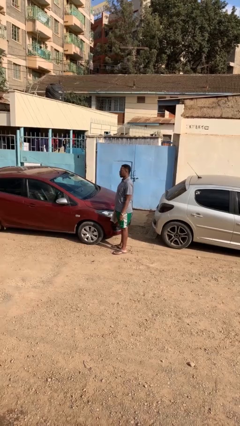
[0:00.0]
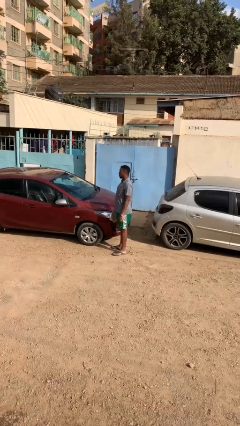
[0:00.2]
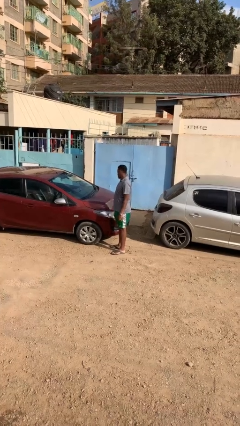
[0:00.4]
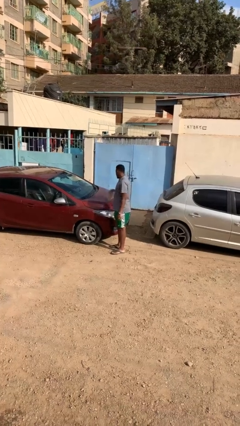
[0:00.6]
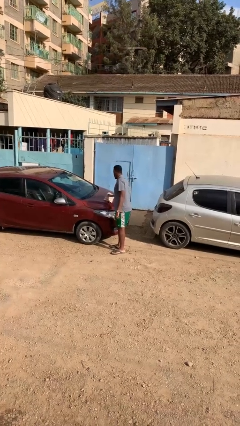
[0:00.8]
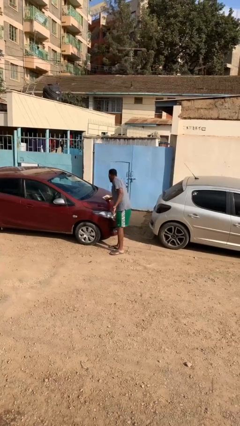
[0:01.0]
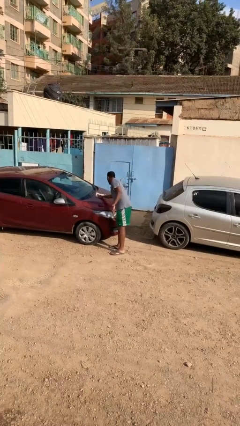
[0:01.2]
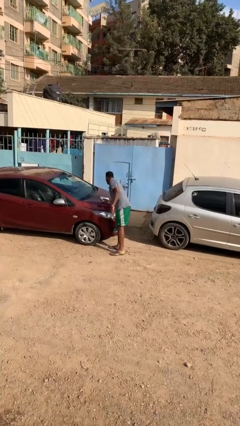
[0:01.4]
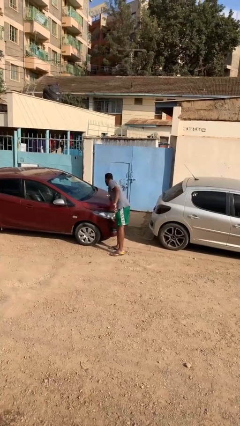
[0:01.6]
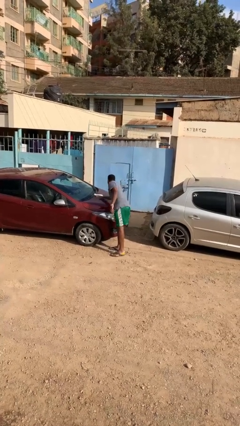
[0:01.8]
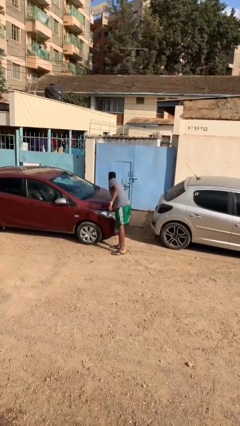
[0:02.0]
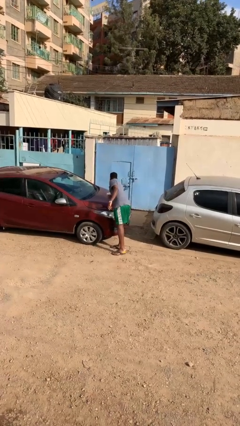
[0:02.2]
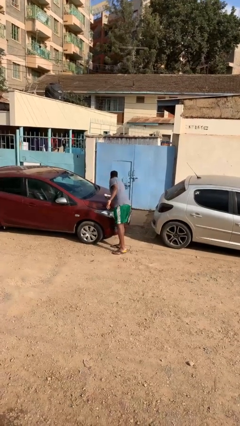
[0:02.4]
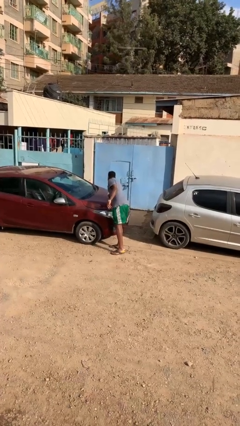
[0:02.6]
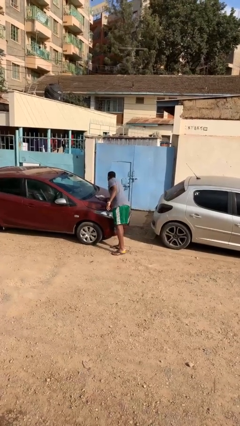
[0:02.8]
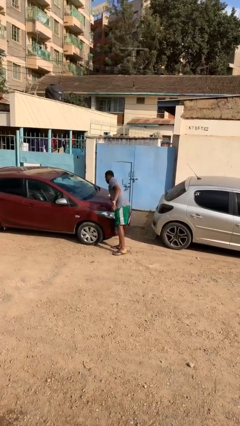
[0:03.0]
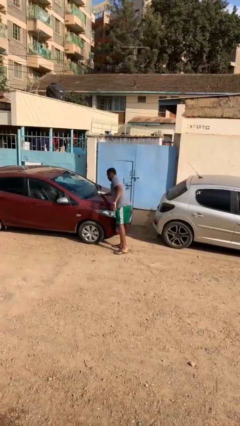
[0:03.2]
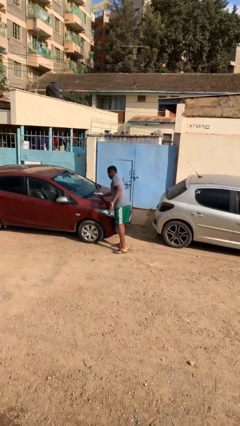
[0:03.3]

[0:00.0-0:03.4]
person polishes car with rag

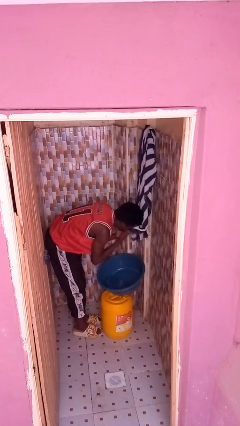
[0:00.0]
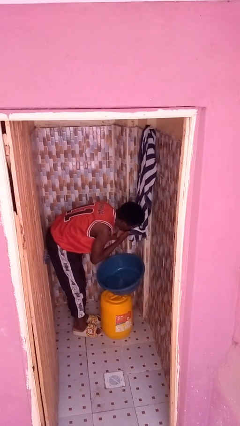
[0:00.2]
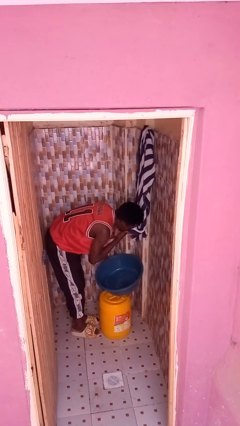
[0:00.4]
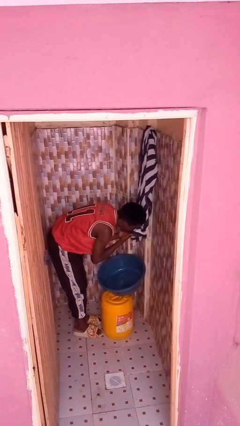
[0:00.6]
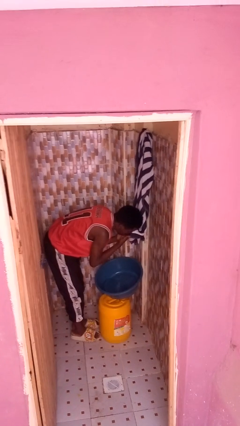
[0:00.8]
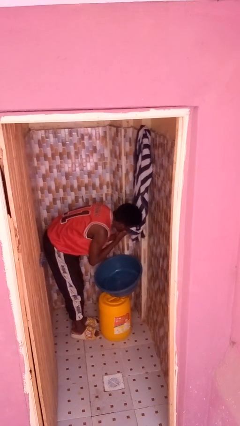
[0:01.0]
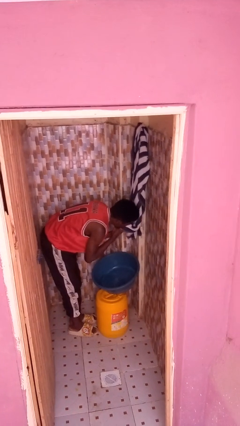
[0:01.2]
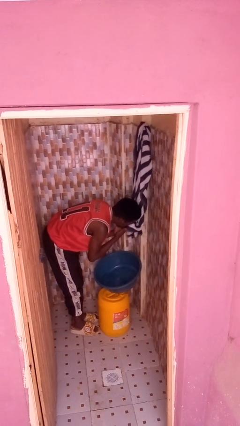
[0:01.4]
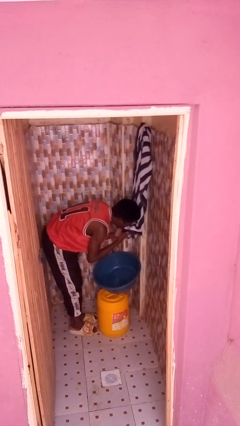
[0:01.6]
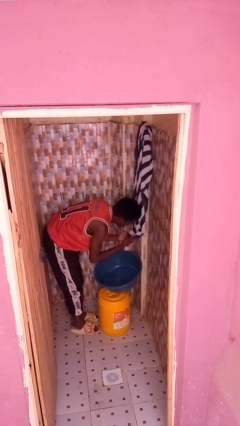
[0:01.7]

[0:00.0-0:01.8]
person dries face with towel

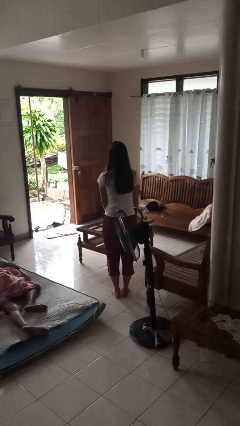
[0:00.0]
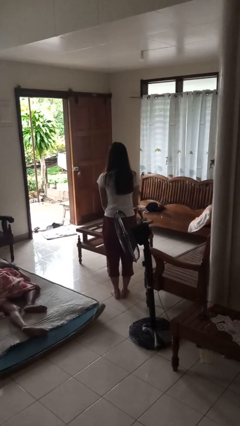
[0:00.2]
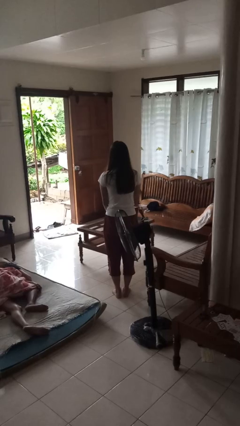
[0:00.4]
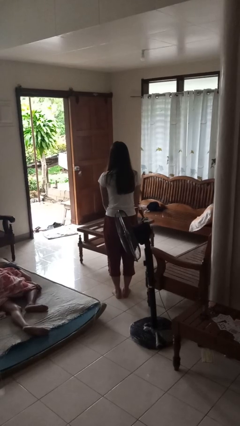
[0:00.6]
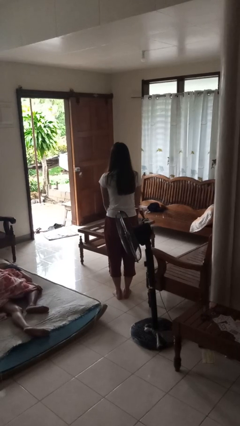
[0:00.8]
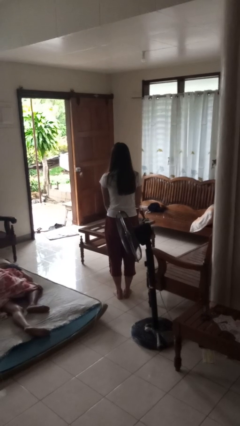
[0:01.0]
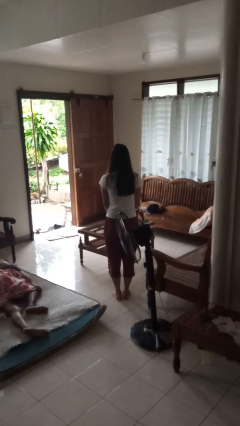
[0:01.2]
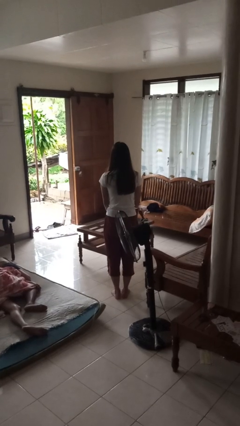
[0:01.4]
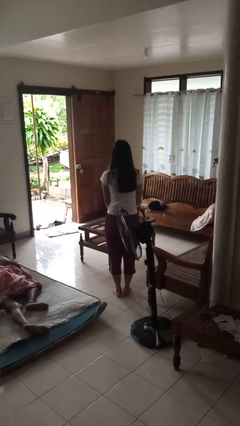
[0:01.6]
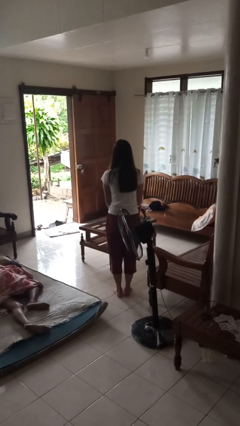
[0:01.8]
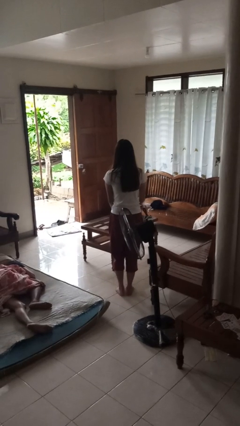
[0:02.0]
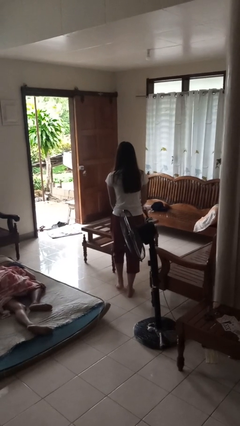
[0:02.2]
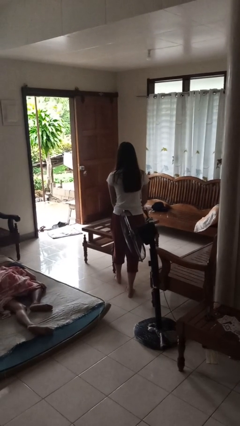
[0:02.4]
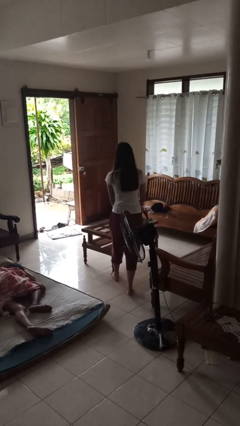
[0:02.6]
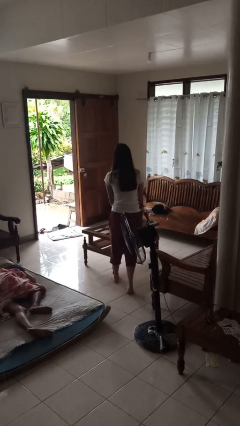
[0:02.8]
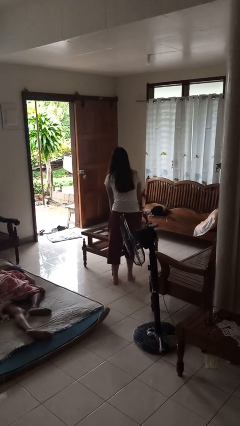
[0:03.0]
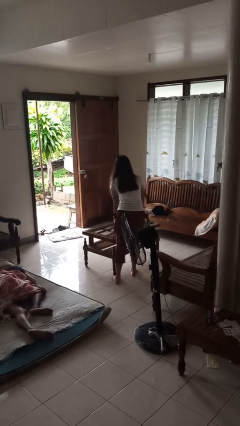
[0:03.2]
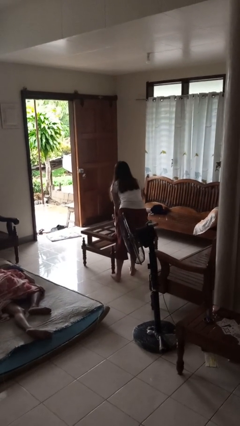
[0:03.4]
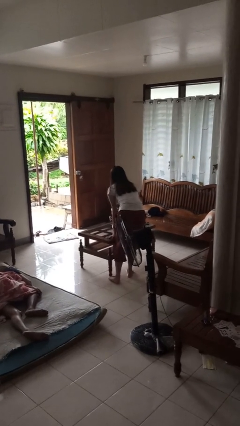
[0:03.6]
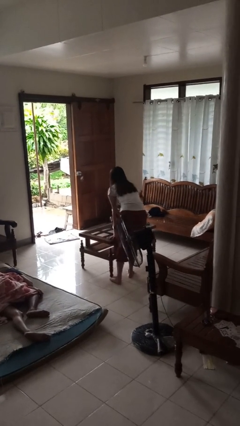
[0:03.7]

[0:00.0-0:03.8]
person bumps into table

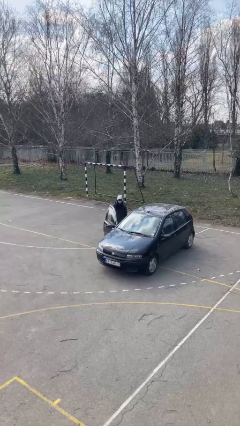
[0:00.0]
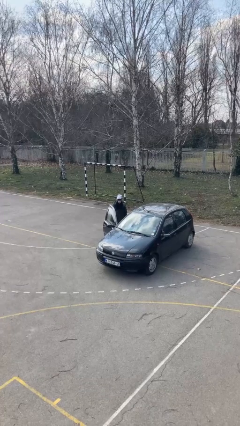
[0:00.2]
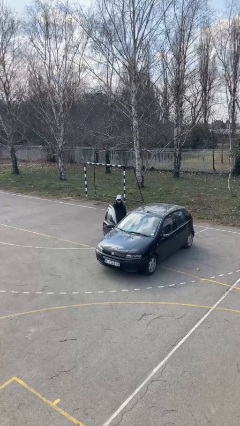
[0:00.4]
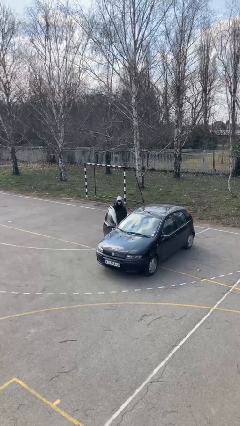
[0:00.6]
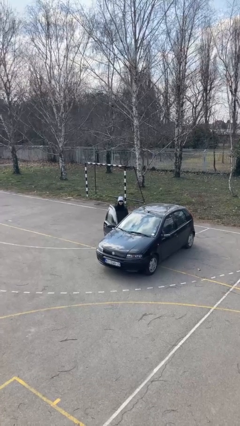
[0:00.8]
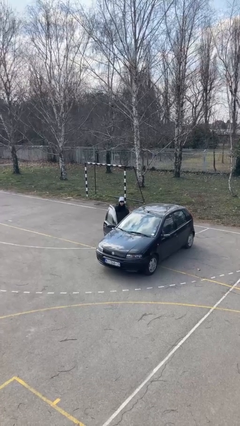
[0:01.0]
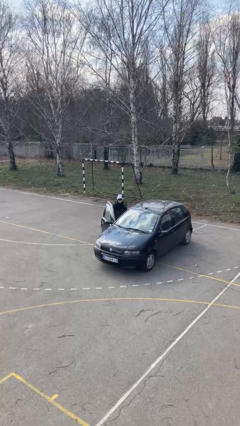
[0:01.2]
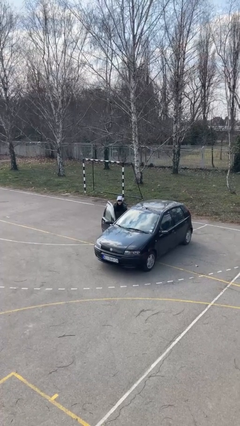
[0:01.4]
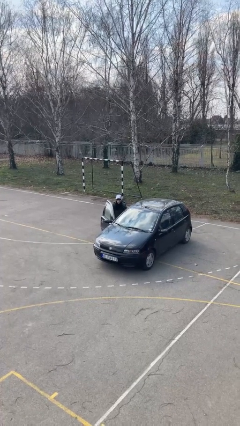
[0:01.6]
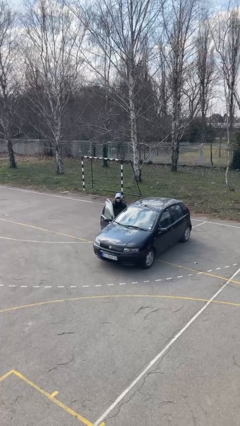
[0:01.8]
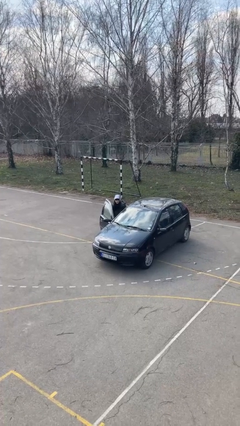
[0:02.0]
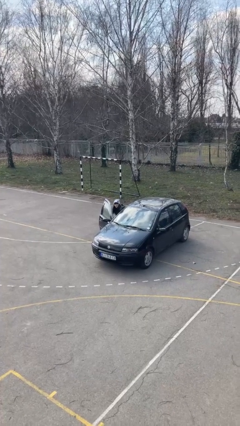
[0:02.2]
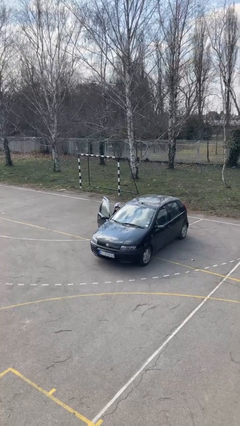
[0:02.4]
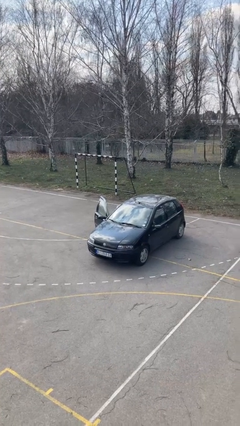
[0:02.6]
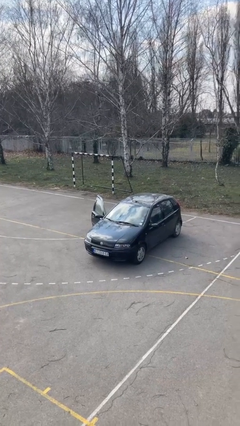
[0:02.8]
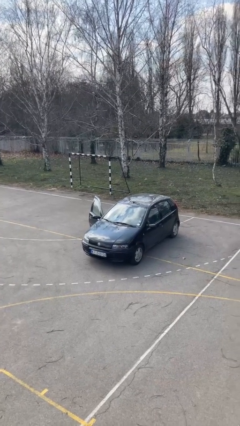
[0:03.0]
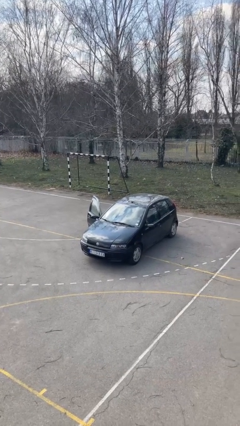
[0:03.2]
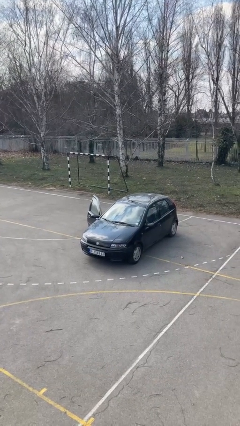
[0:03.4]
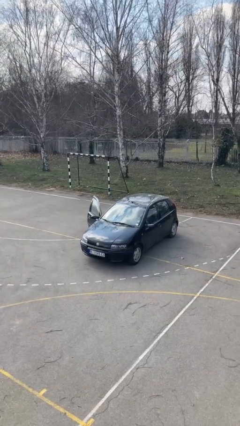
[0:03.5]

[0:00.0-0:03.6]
person enters car

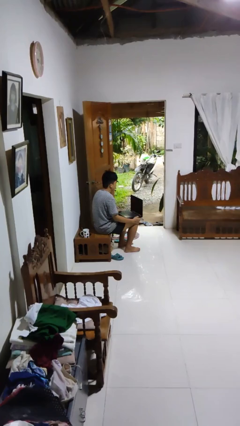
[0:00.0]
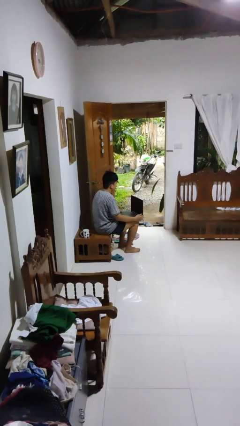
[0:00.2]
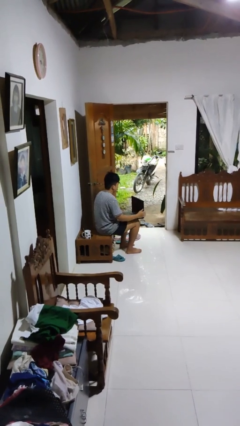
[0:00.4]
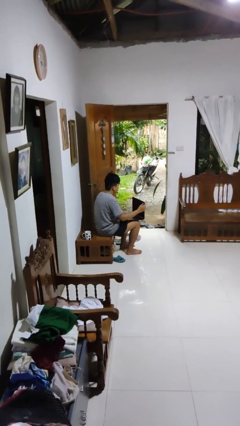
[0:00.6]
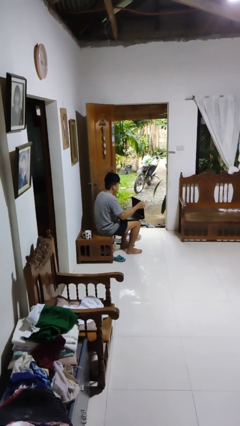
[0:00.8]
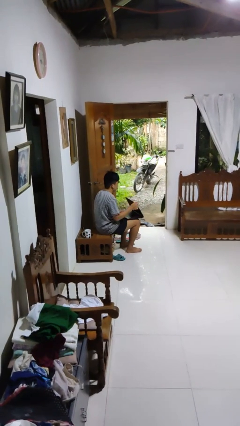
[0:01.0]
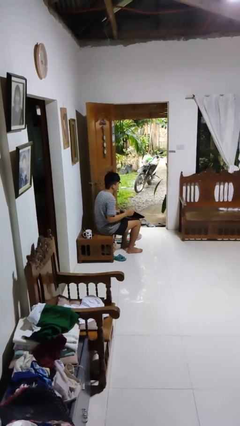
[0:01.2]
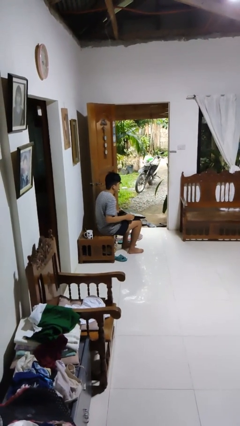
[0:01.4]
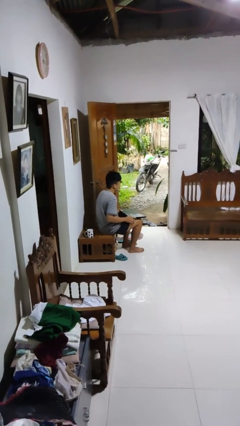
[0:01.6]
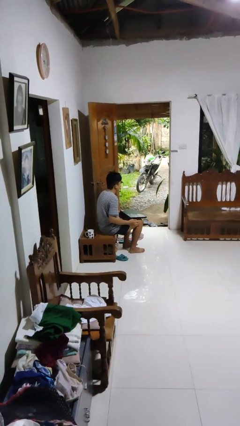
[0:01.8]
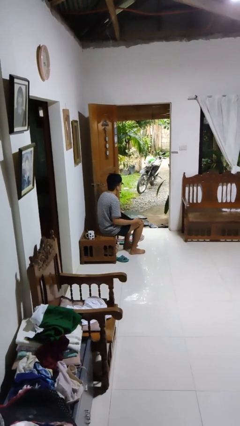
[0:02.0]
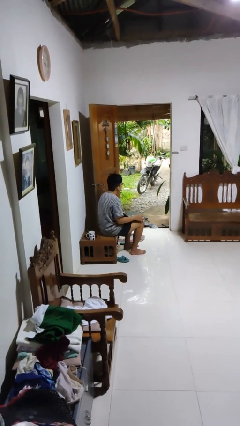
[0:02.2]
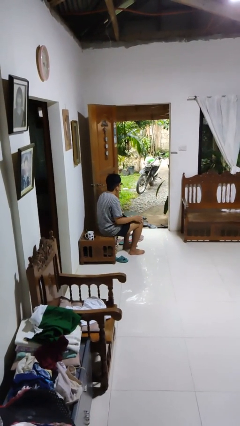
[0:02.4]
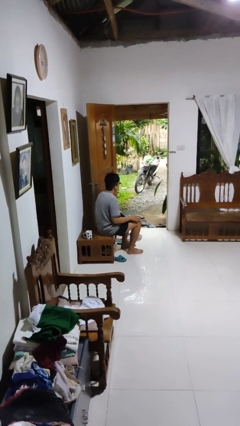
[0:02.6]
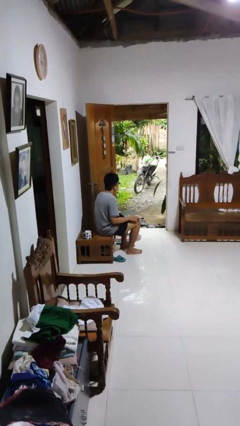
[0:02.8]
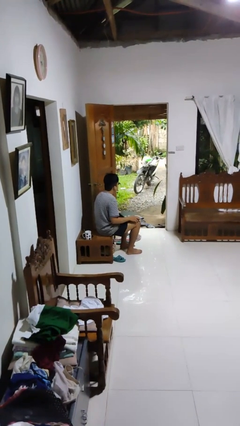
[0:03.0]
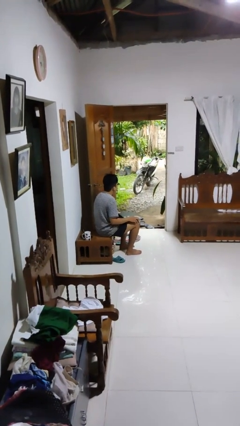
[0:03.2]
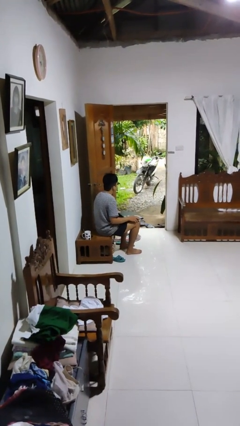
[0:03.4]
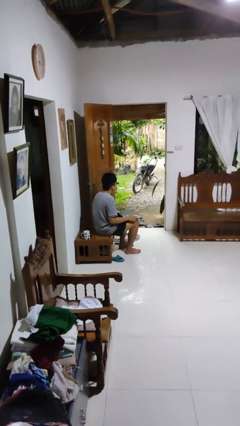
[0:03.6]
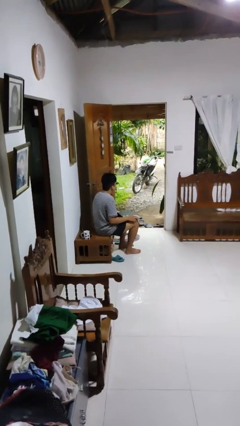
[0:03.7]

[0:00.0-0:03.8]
person closes laptop

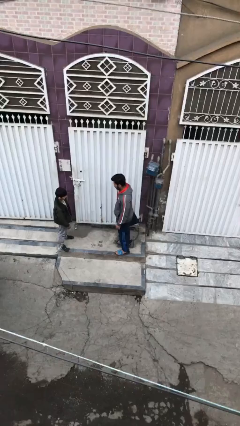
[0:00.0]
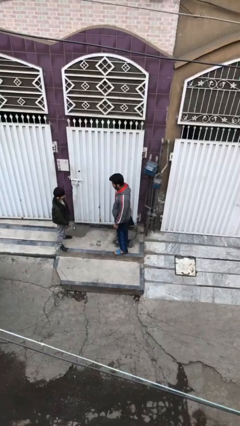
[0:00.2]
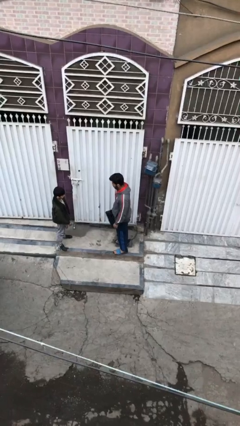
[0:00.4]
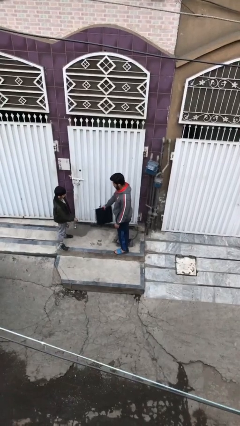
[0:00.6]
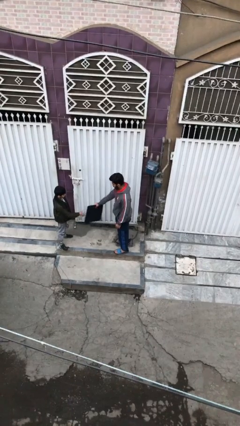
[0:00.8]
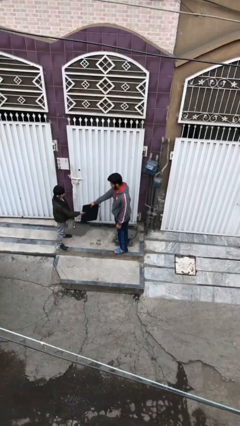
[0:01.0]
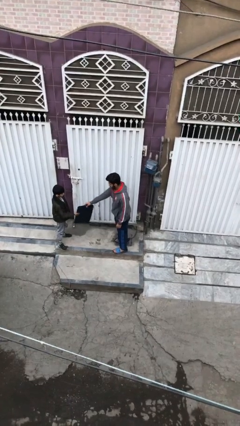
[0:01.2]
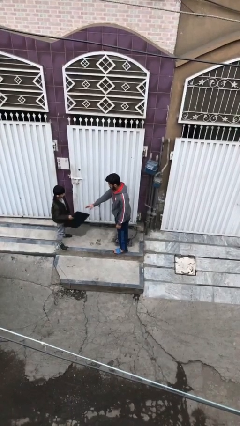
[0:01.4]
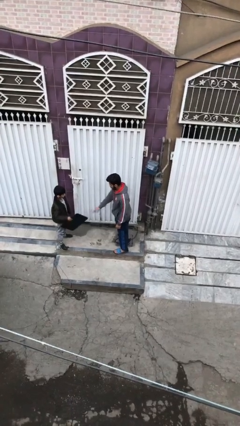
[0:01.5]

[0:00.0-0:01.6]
person transfers object to person
